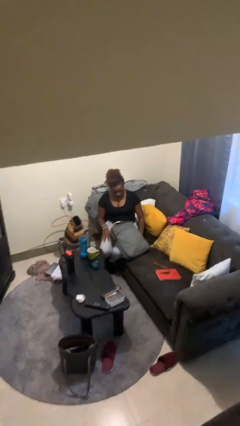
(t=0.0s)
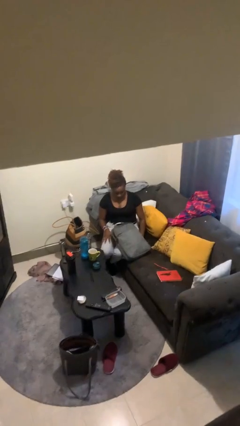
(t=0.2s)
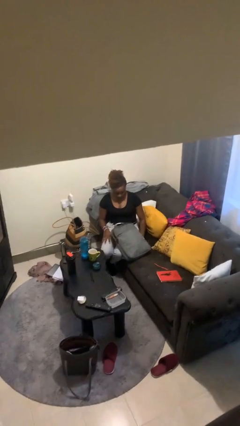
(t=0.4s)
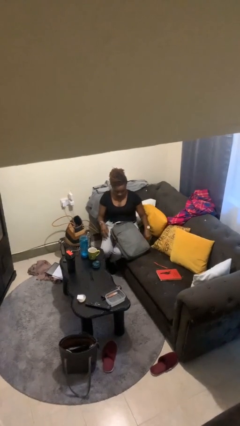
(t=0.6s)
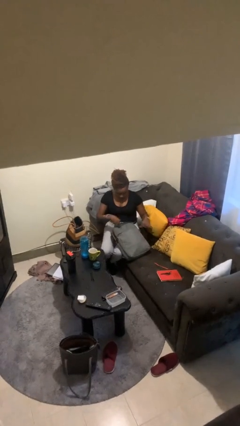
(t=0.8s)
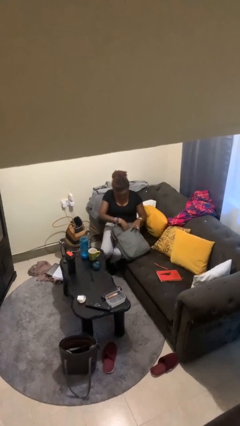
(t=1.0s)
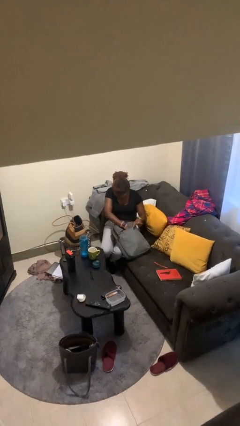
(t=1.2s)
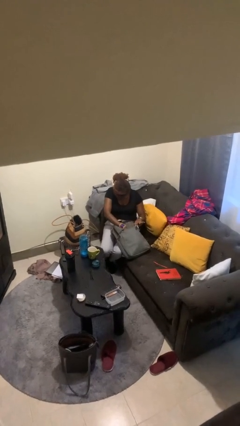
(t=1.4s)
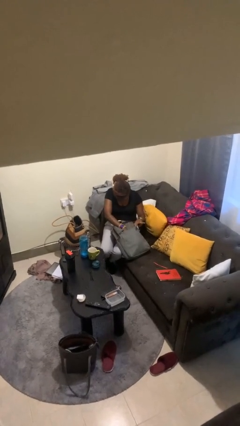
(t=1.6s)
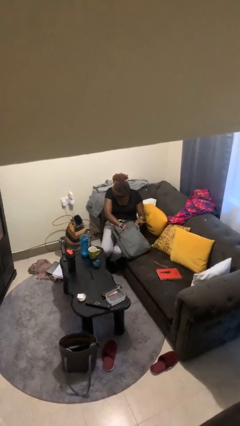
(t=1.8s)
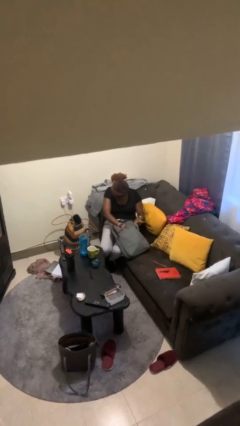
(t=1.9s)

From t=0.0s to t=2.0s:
person searches in backpack

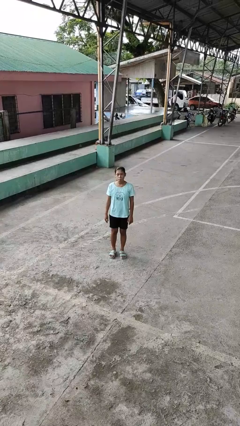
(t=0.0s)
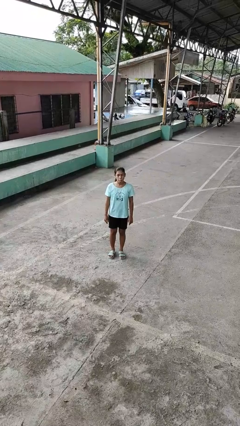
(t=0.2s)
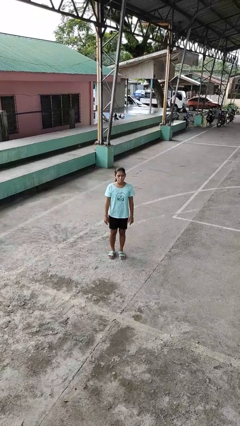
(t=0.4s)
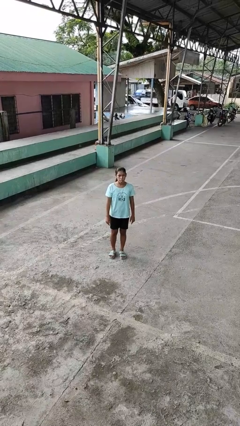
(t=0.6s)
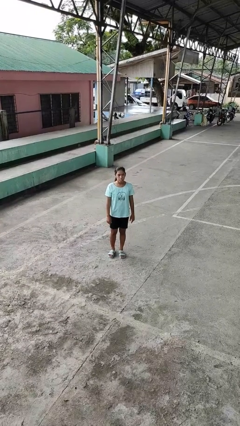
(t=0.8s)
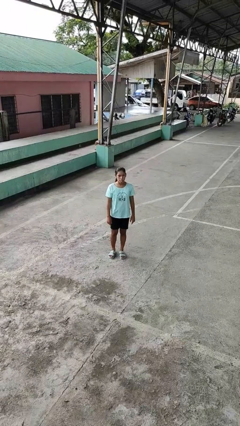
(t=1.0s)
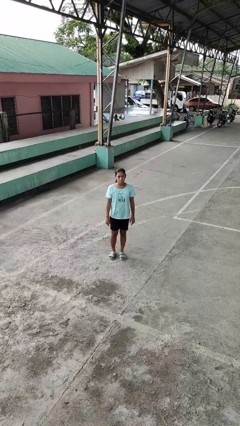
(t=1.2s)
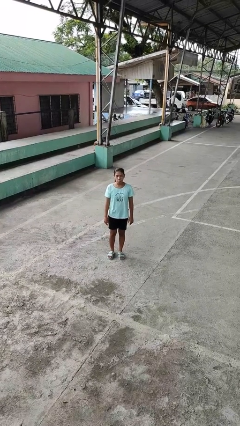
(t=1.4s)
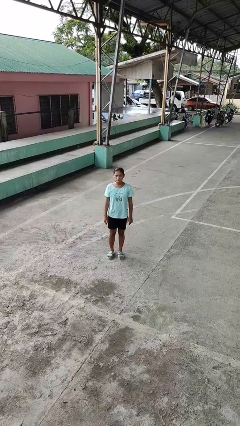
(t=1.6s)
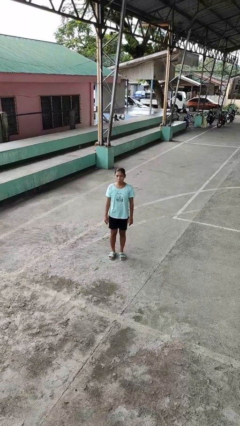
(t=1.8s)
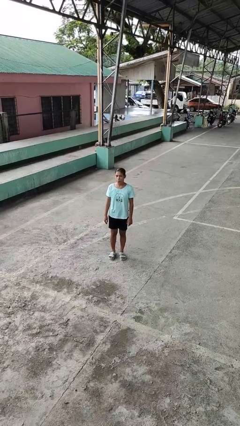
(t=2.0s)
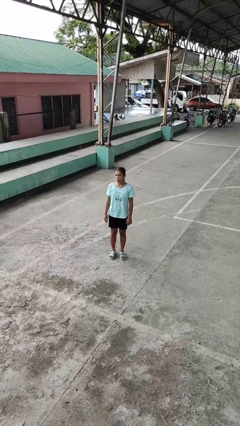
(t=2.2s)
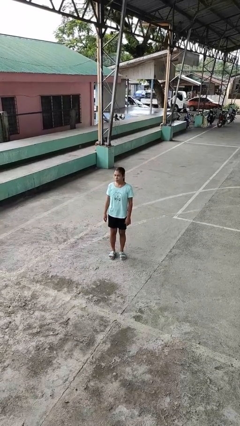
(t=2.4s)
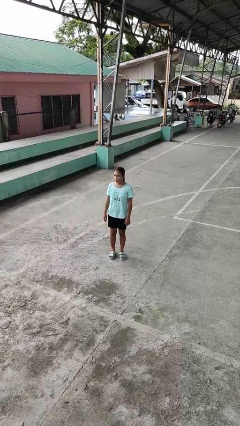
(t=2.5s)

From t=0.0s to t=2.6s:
person sticks out tongue

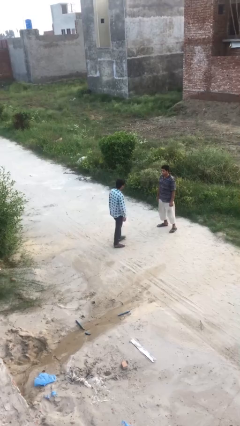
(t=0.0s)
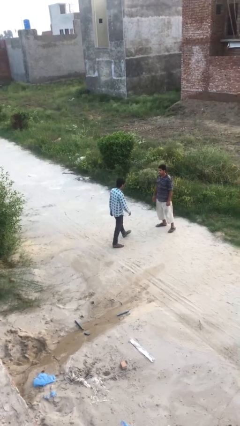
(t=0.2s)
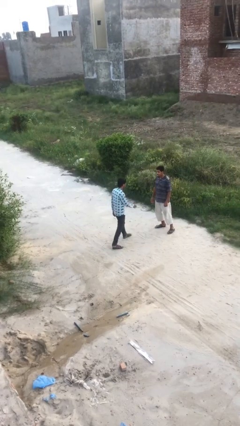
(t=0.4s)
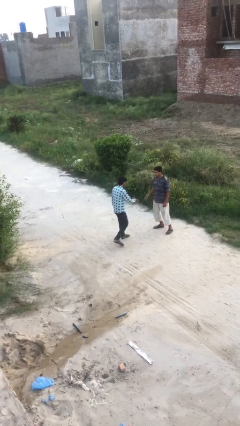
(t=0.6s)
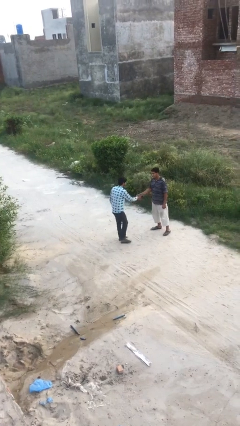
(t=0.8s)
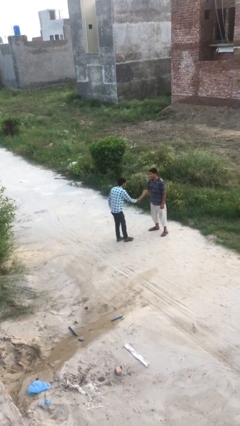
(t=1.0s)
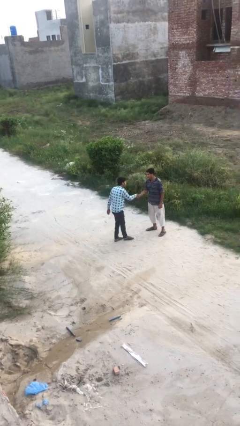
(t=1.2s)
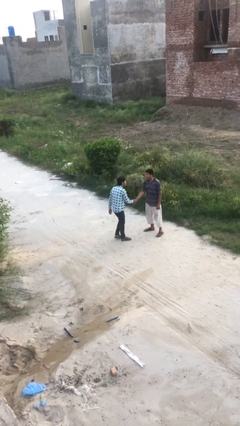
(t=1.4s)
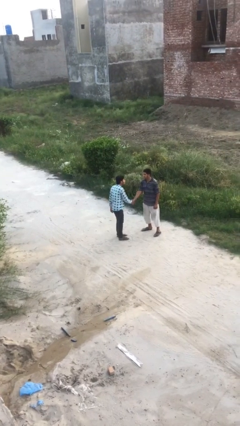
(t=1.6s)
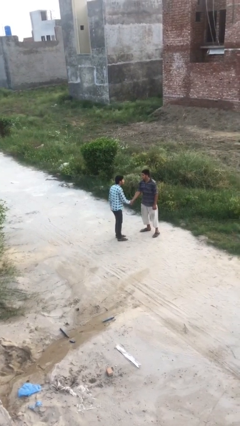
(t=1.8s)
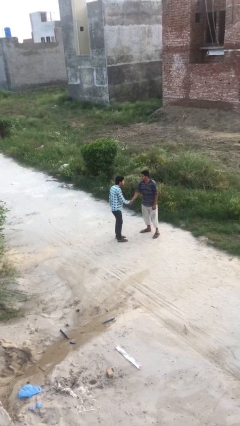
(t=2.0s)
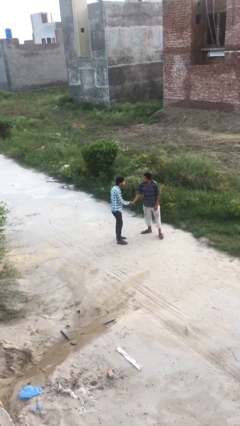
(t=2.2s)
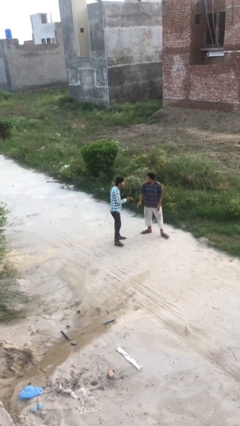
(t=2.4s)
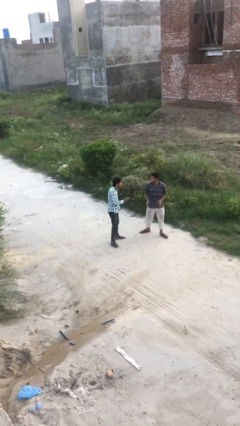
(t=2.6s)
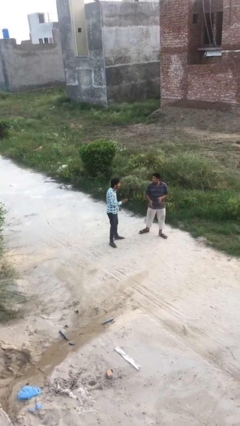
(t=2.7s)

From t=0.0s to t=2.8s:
person shakes hand

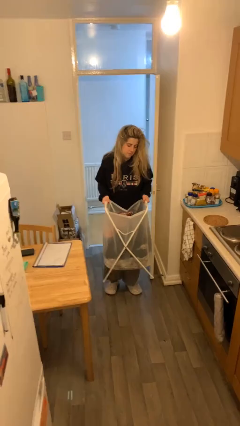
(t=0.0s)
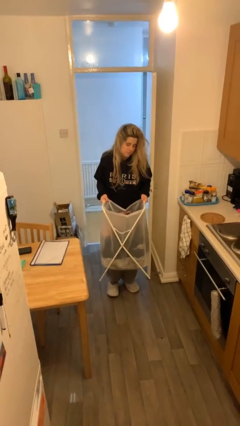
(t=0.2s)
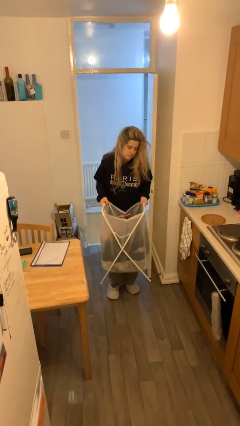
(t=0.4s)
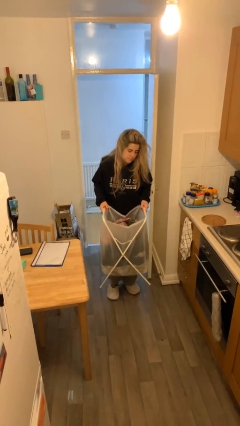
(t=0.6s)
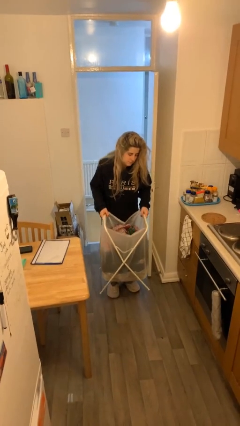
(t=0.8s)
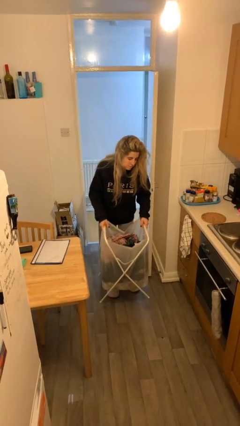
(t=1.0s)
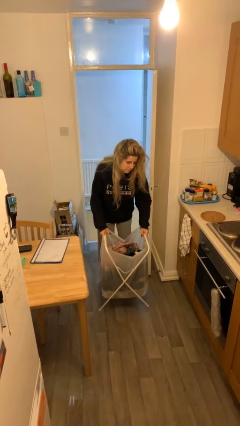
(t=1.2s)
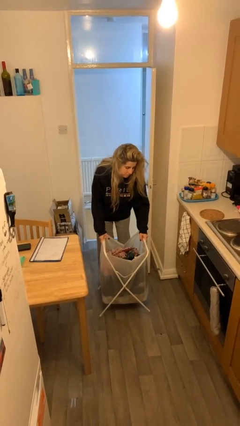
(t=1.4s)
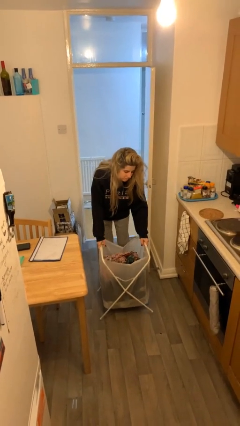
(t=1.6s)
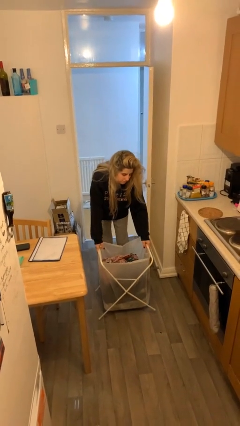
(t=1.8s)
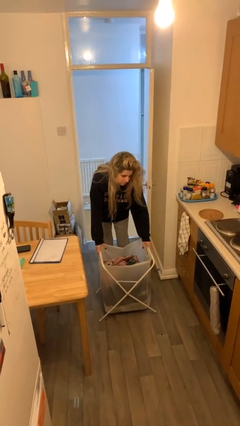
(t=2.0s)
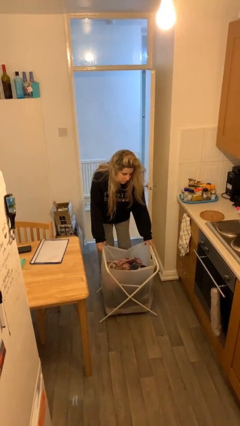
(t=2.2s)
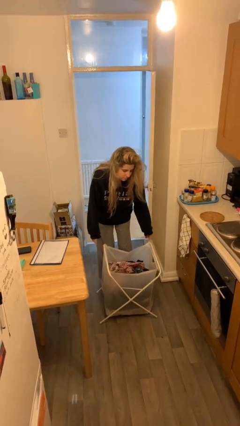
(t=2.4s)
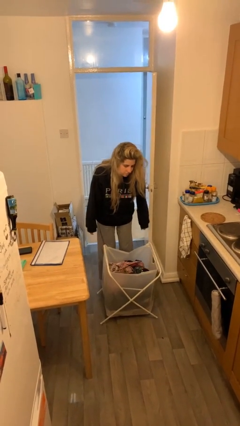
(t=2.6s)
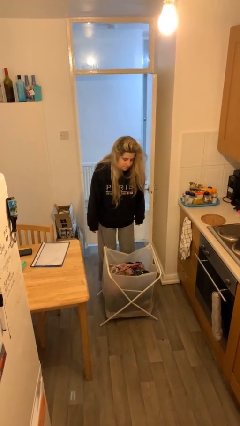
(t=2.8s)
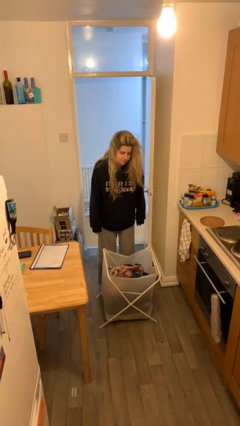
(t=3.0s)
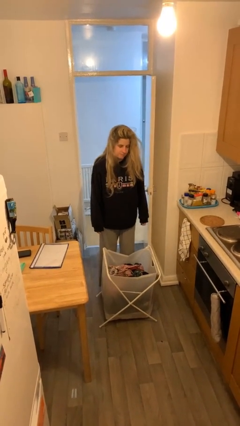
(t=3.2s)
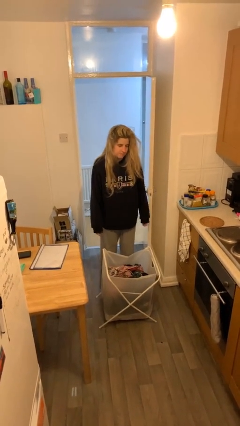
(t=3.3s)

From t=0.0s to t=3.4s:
person puts down object on floor

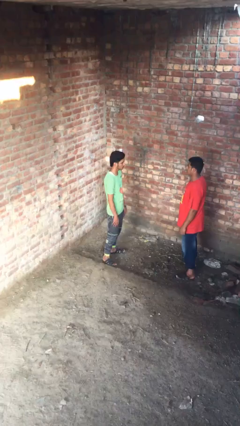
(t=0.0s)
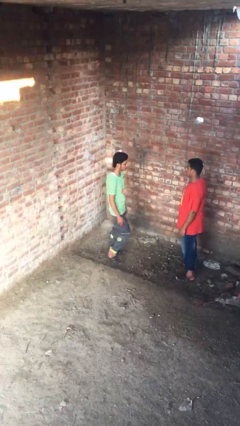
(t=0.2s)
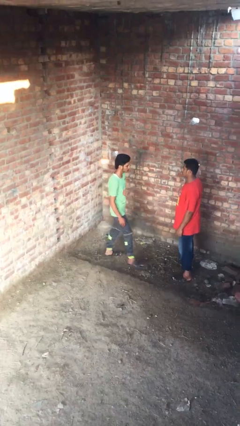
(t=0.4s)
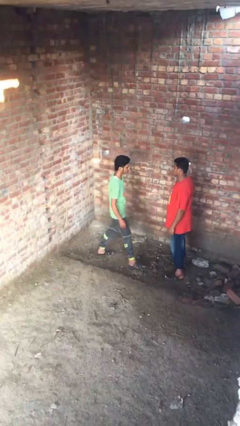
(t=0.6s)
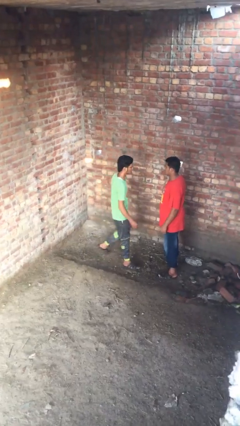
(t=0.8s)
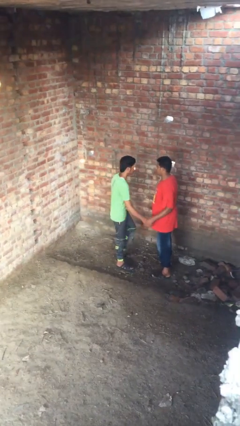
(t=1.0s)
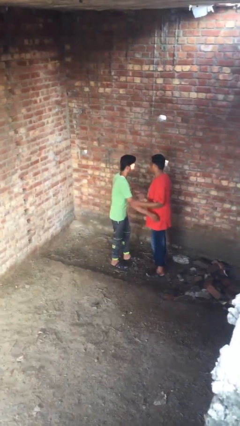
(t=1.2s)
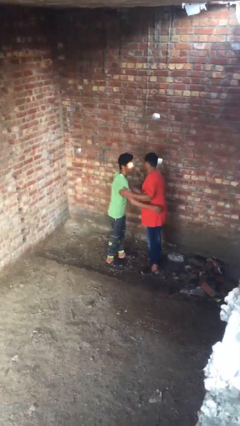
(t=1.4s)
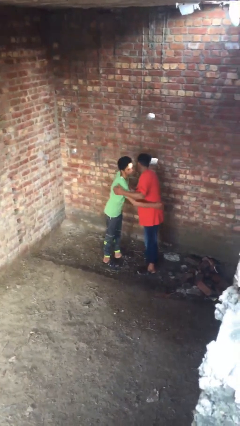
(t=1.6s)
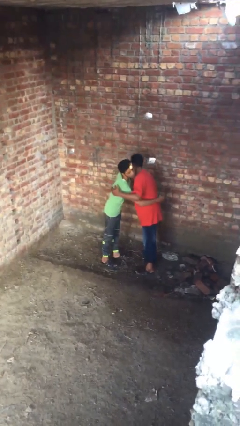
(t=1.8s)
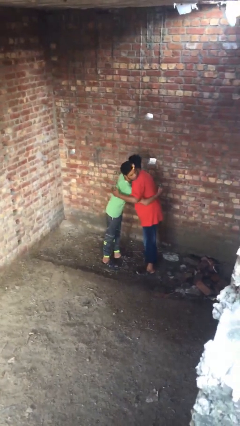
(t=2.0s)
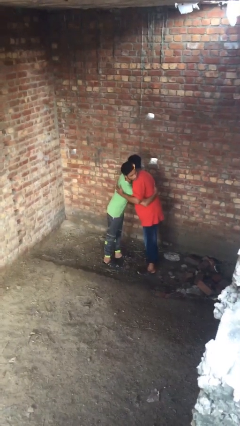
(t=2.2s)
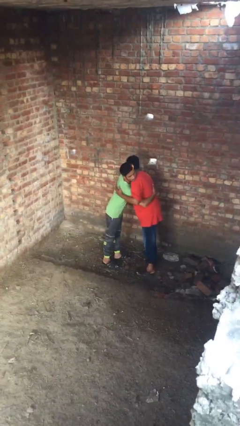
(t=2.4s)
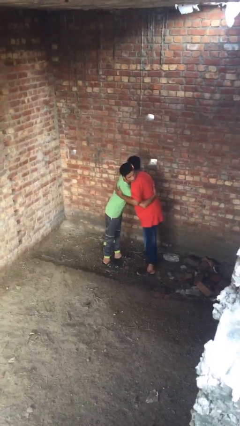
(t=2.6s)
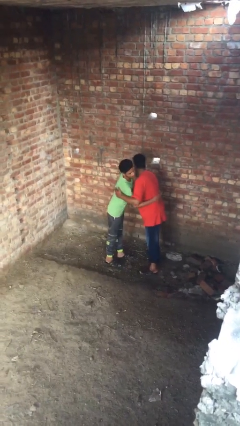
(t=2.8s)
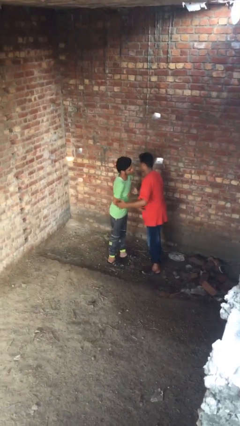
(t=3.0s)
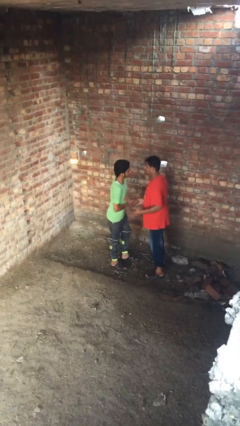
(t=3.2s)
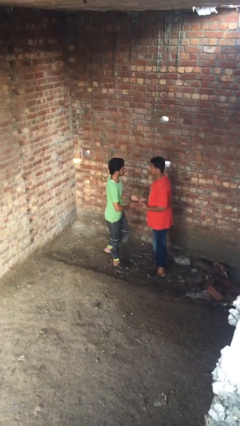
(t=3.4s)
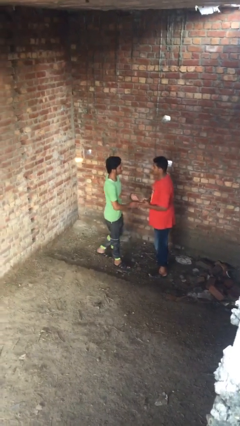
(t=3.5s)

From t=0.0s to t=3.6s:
person embraces person

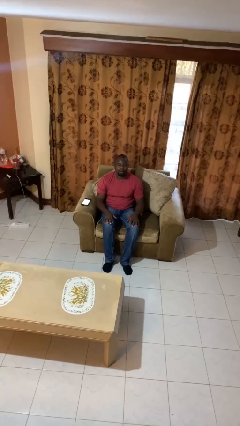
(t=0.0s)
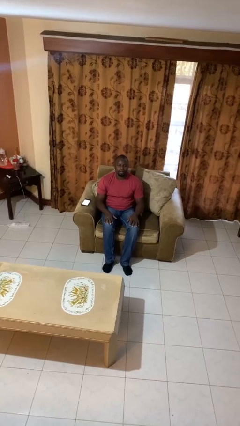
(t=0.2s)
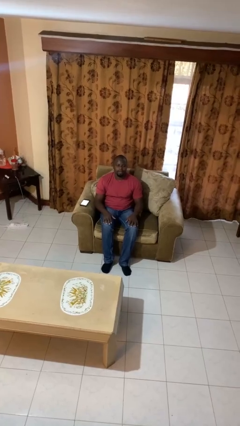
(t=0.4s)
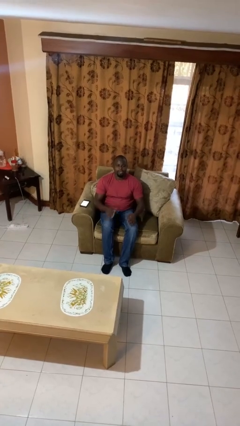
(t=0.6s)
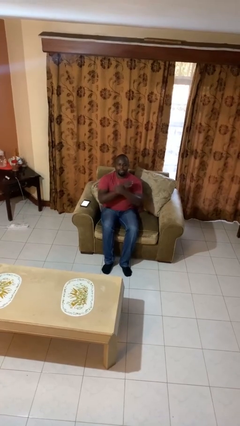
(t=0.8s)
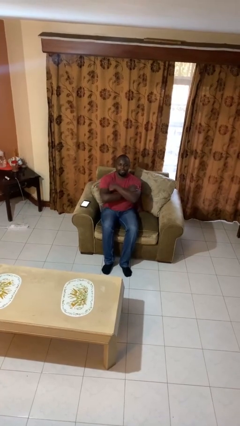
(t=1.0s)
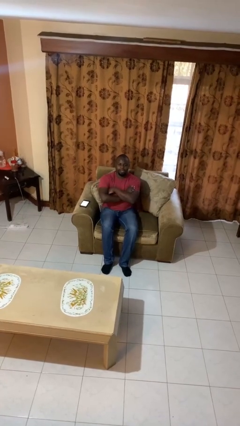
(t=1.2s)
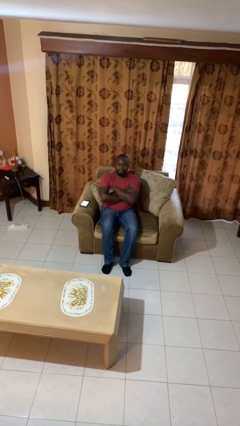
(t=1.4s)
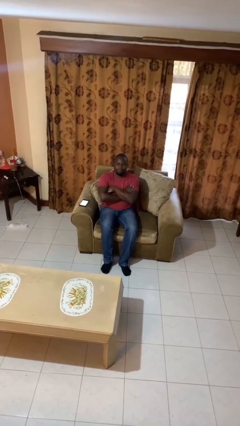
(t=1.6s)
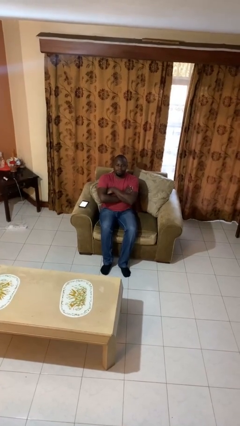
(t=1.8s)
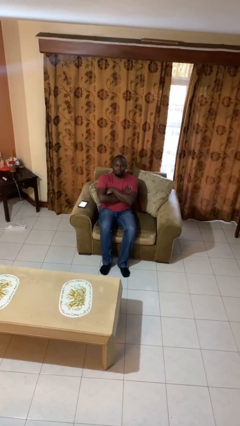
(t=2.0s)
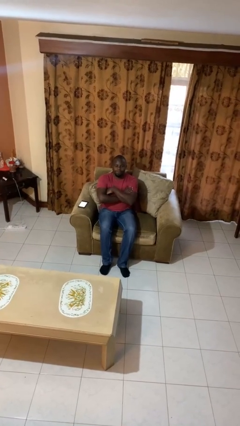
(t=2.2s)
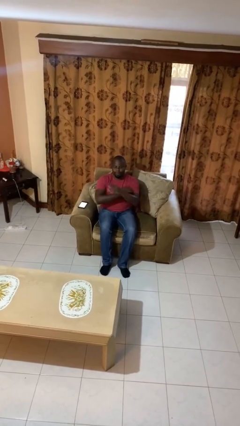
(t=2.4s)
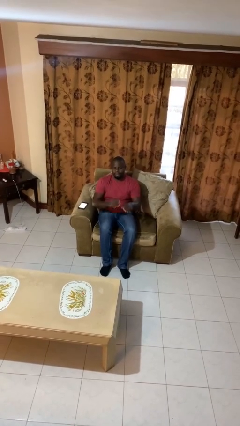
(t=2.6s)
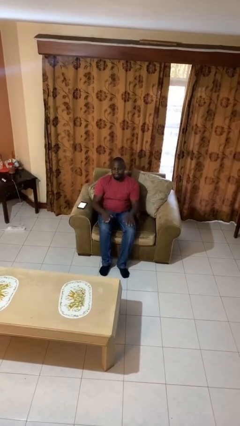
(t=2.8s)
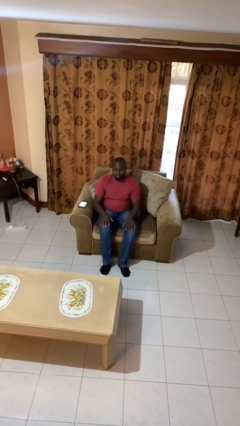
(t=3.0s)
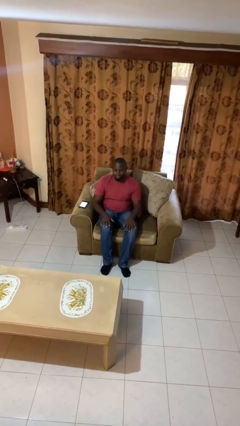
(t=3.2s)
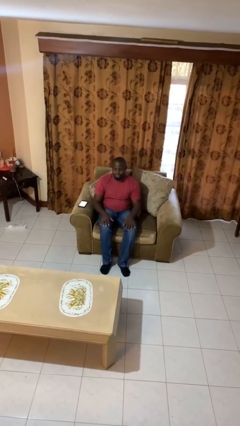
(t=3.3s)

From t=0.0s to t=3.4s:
person crosses arms
